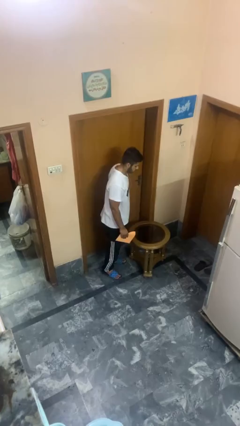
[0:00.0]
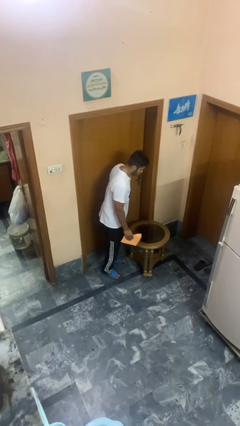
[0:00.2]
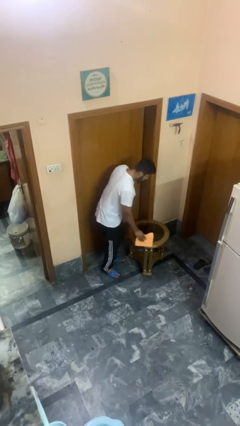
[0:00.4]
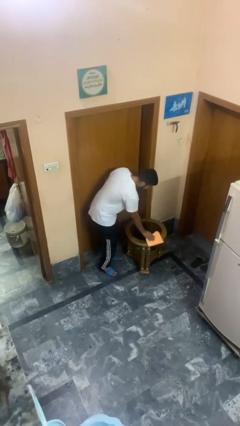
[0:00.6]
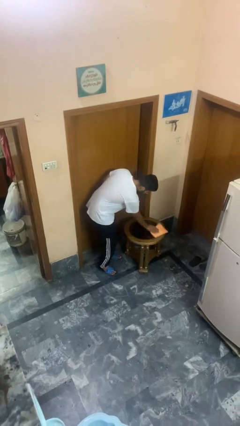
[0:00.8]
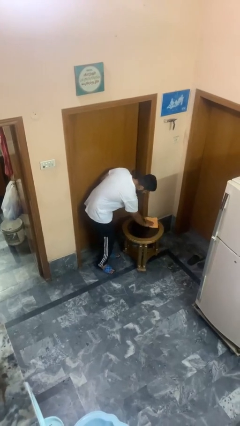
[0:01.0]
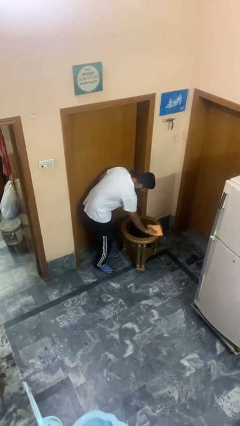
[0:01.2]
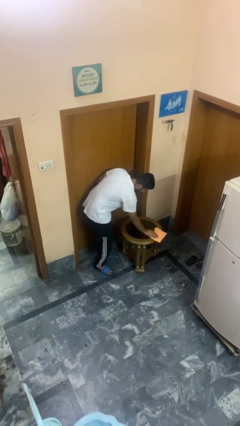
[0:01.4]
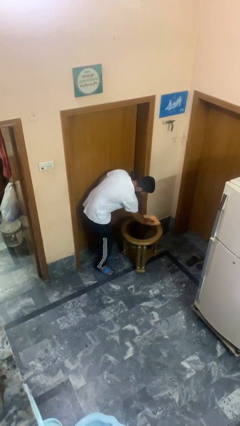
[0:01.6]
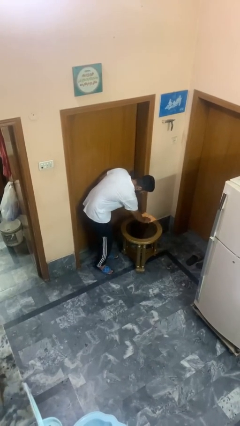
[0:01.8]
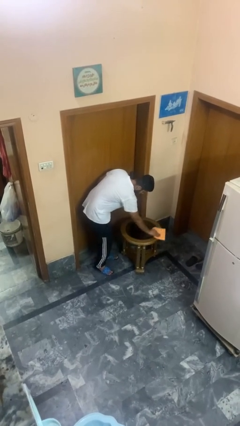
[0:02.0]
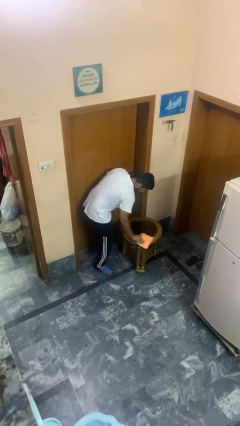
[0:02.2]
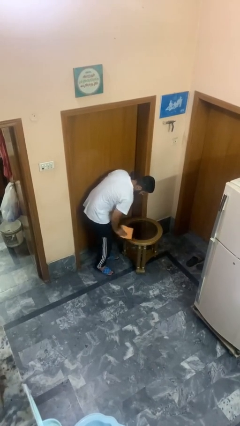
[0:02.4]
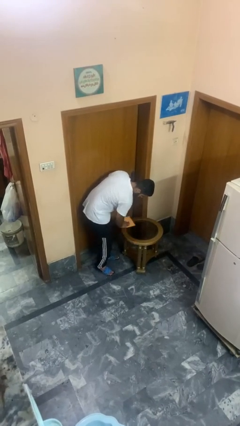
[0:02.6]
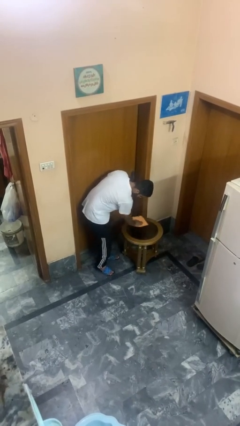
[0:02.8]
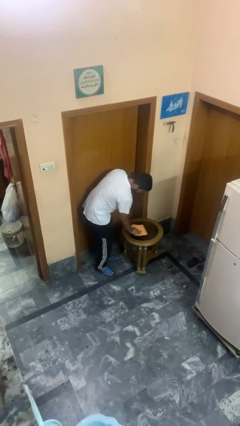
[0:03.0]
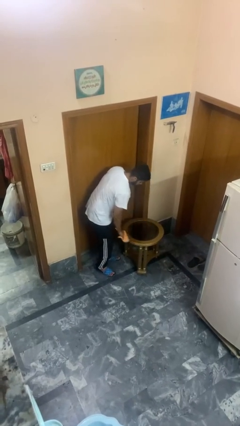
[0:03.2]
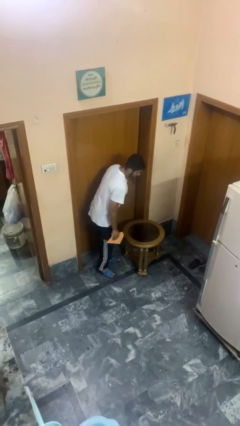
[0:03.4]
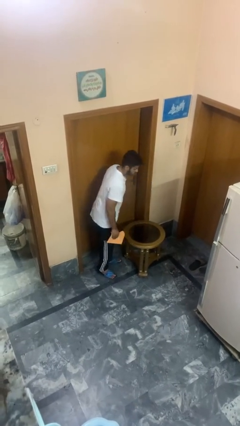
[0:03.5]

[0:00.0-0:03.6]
person cleans table with rag

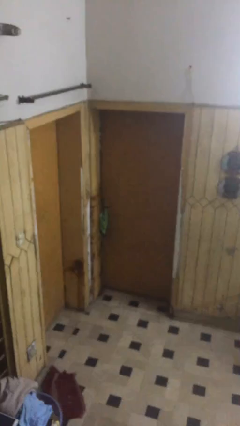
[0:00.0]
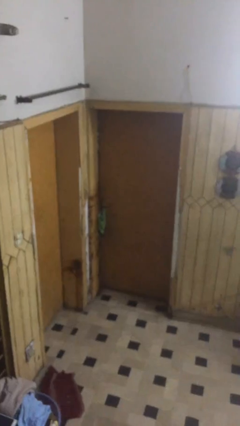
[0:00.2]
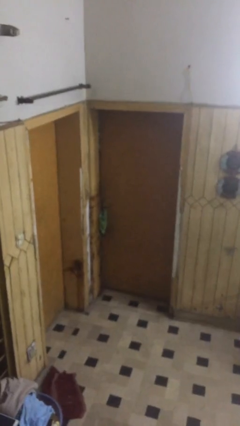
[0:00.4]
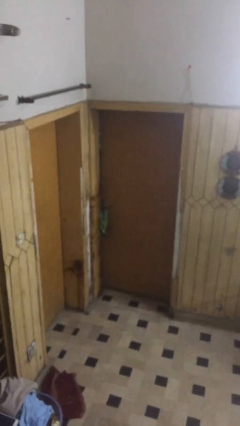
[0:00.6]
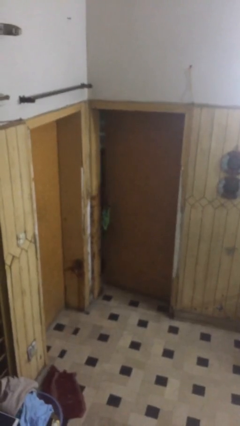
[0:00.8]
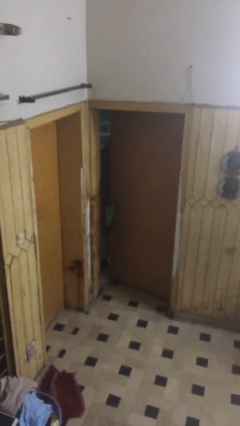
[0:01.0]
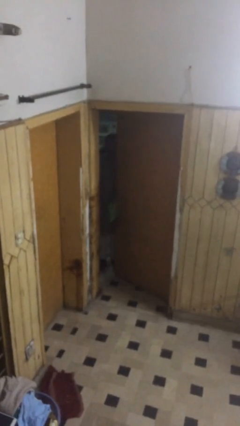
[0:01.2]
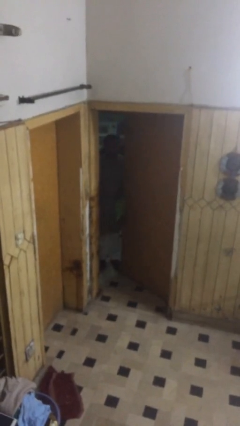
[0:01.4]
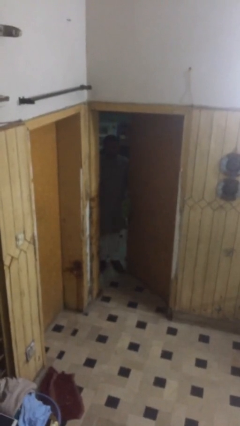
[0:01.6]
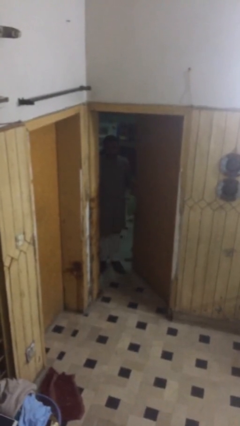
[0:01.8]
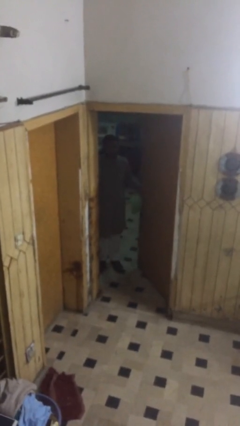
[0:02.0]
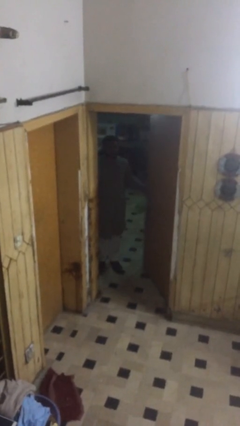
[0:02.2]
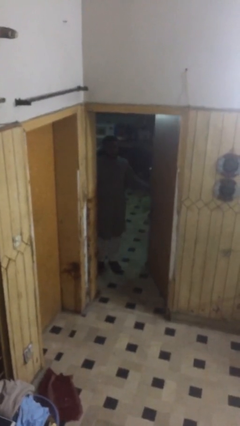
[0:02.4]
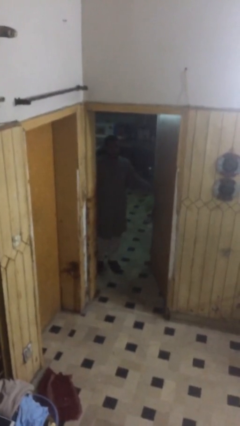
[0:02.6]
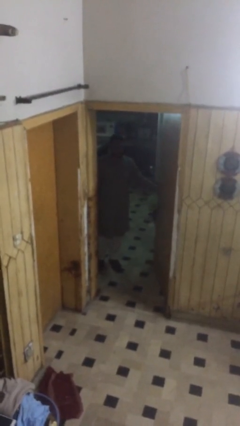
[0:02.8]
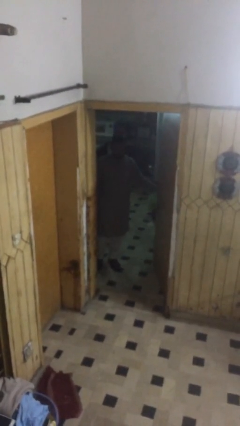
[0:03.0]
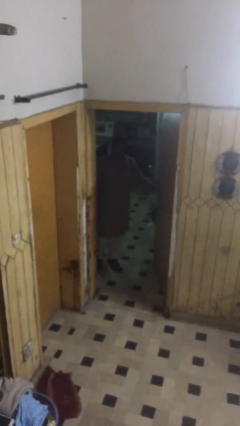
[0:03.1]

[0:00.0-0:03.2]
person opens facility door

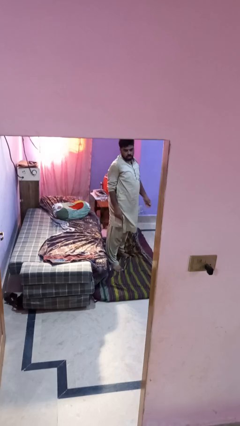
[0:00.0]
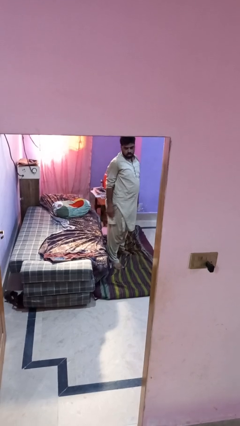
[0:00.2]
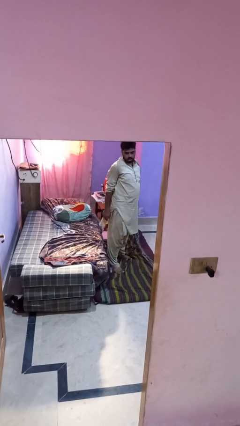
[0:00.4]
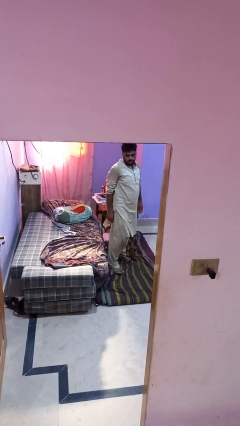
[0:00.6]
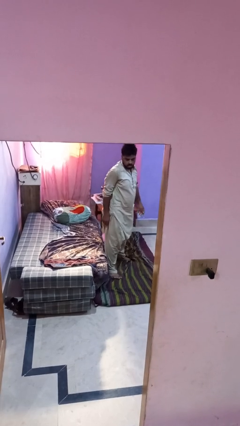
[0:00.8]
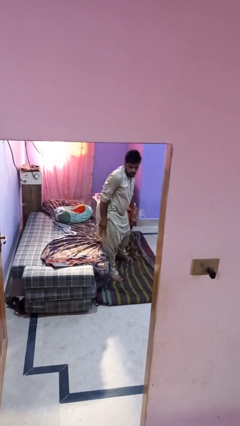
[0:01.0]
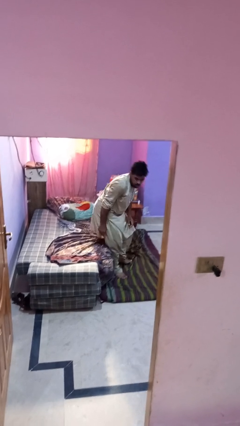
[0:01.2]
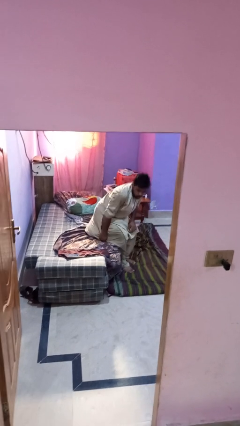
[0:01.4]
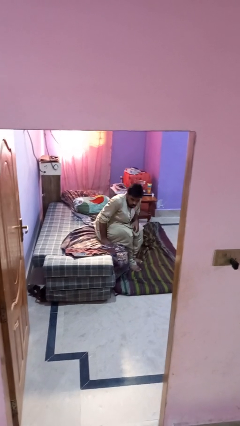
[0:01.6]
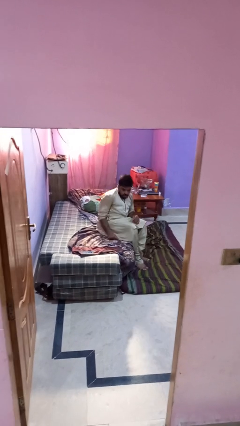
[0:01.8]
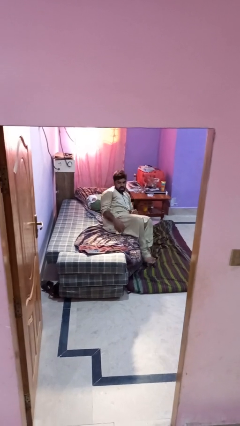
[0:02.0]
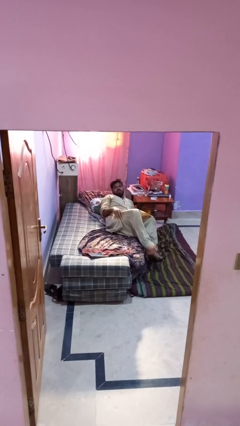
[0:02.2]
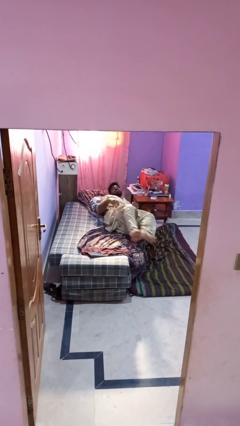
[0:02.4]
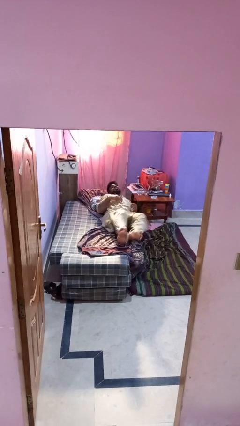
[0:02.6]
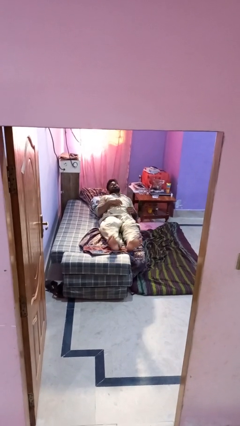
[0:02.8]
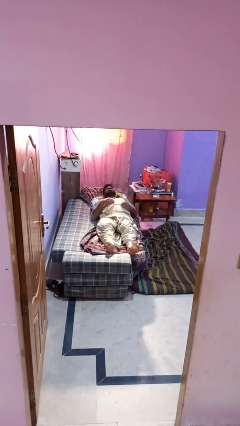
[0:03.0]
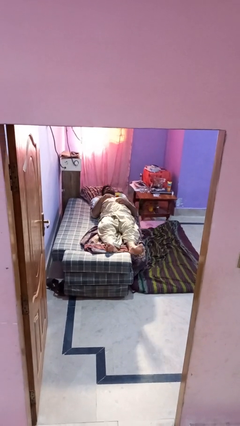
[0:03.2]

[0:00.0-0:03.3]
person lies down on bed

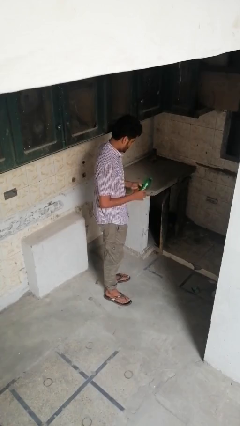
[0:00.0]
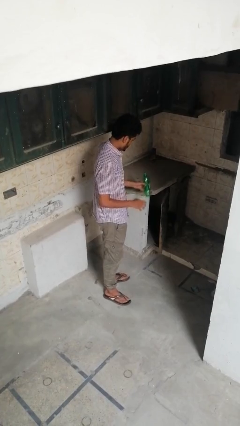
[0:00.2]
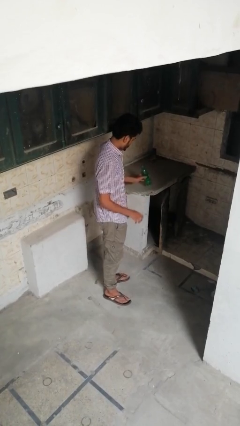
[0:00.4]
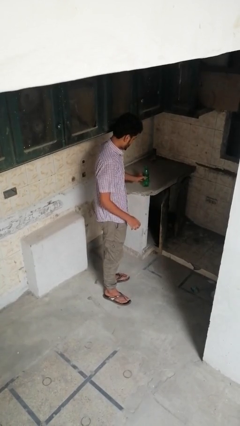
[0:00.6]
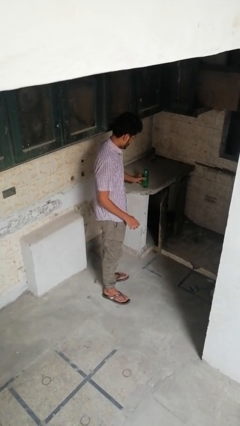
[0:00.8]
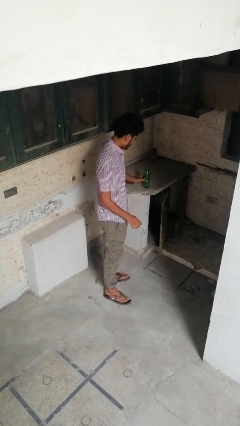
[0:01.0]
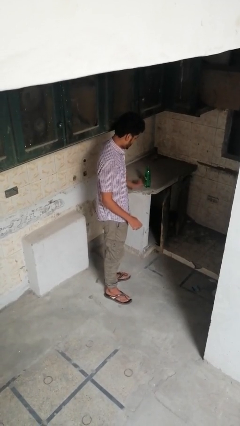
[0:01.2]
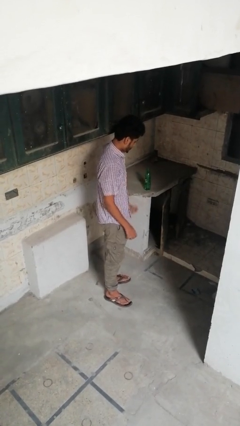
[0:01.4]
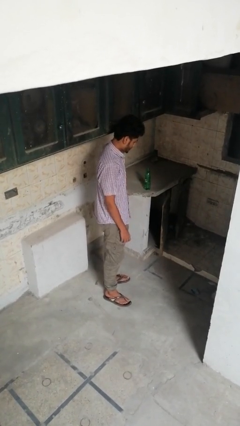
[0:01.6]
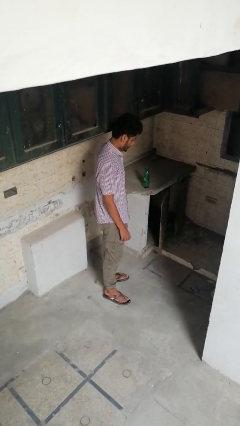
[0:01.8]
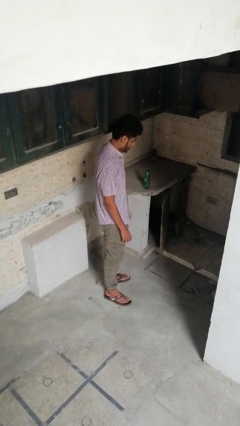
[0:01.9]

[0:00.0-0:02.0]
person puts down object on countertop

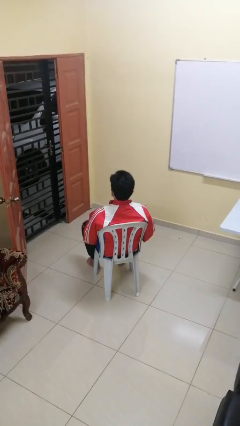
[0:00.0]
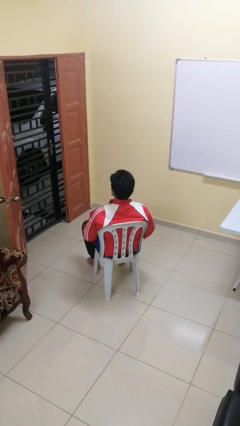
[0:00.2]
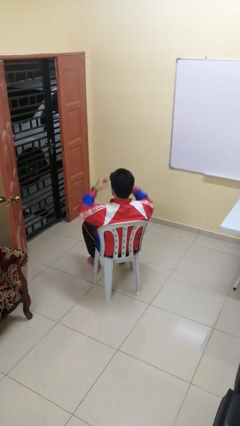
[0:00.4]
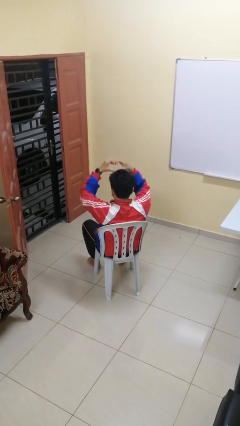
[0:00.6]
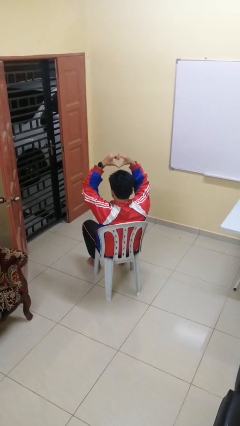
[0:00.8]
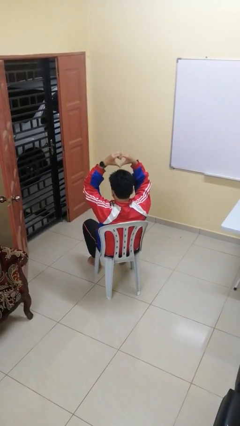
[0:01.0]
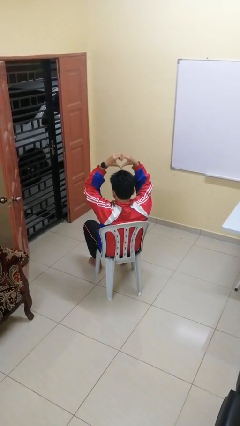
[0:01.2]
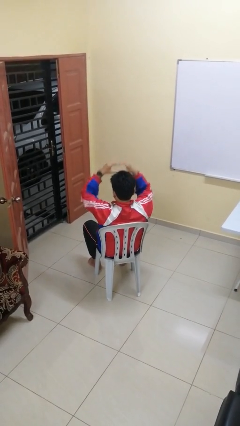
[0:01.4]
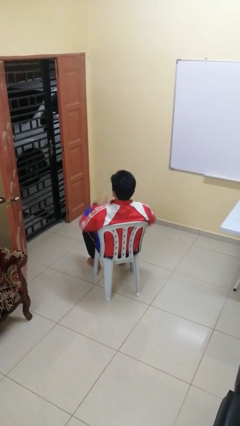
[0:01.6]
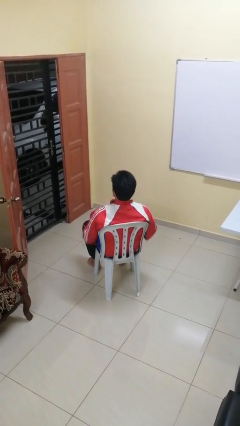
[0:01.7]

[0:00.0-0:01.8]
person gestures heart

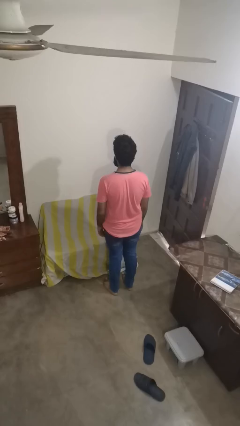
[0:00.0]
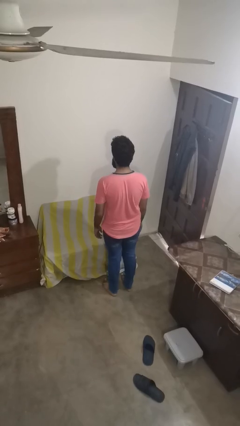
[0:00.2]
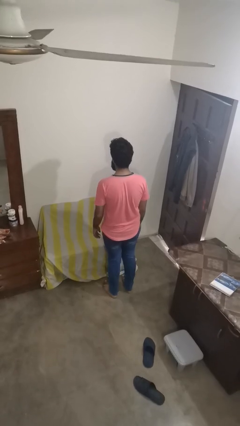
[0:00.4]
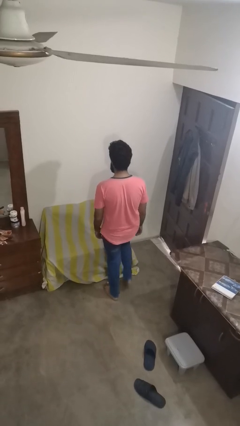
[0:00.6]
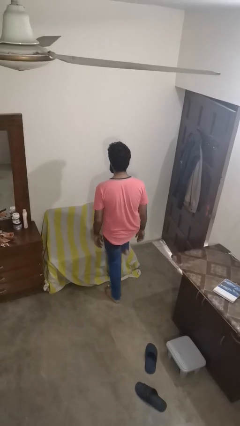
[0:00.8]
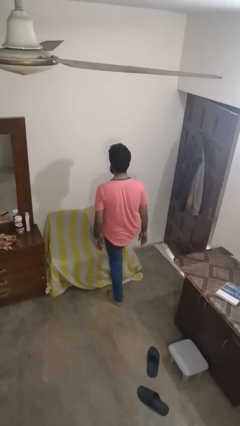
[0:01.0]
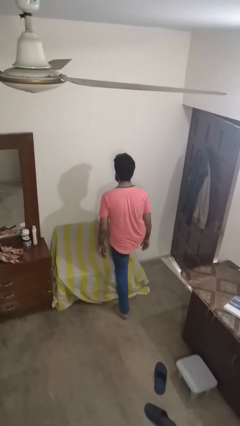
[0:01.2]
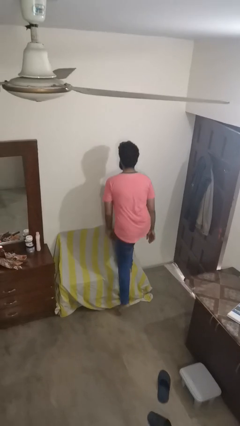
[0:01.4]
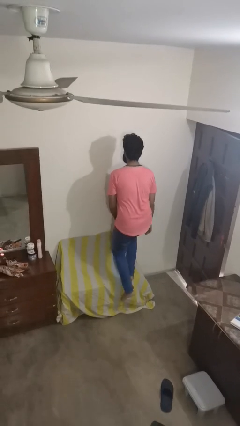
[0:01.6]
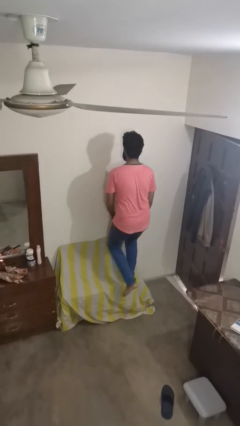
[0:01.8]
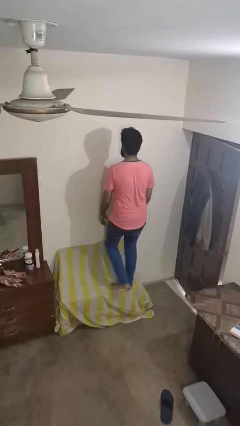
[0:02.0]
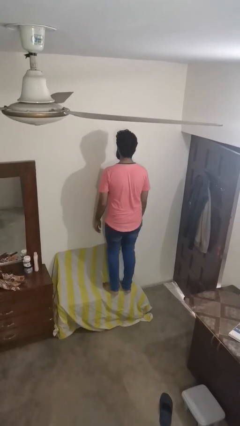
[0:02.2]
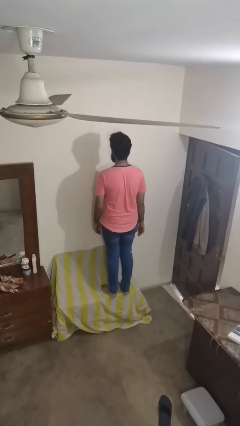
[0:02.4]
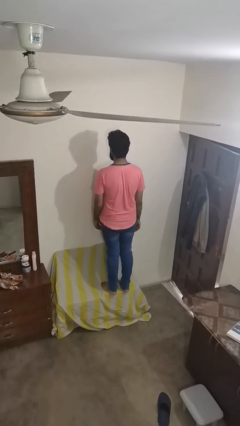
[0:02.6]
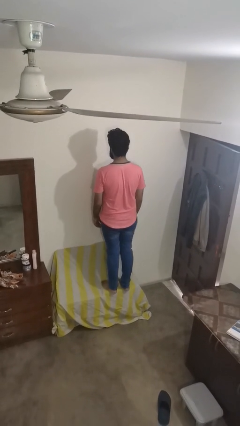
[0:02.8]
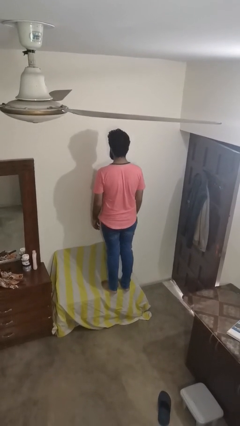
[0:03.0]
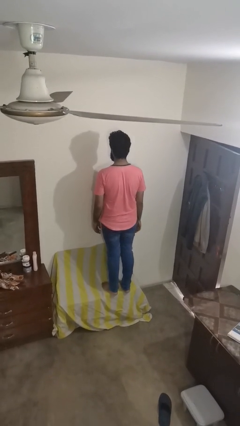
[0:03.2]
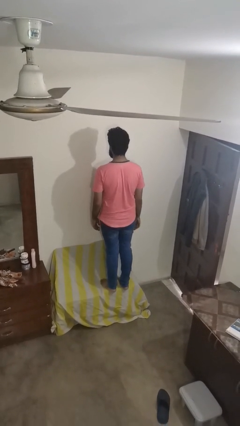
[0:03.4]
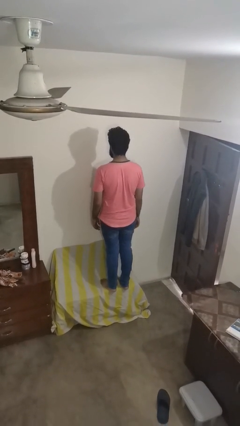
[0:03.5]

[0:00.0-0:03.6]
person climbs on couch
